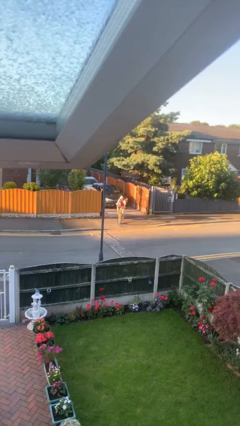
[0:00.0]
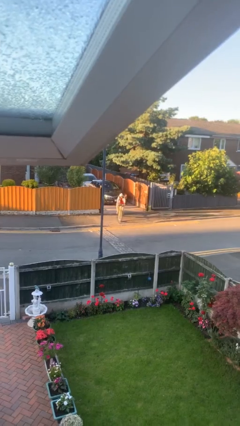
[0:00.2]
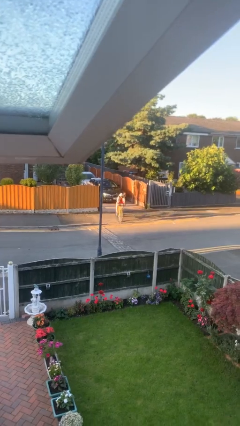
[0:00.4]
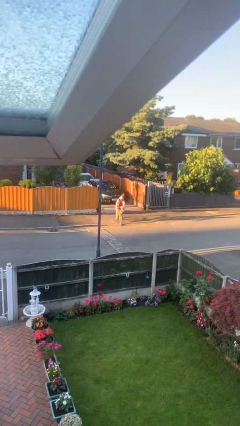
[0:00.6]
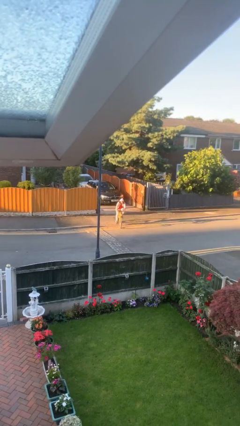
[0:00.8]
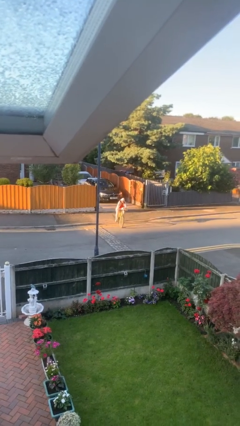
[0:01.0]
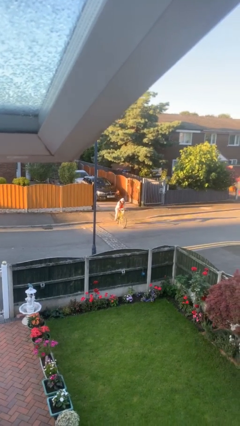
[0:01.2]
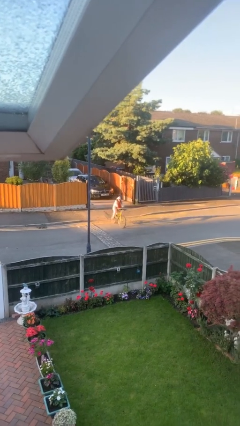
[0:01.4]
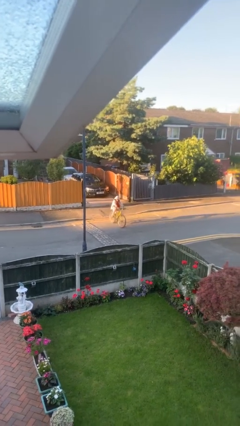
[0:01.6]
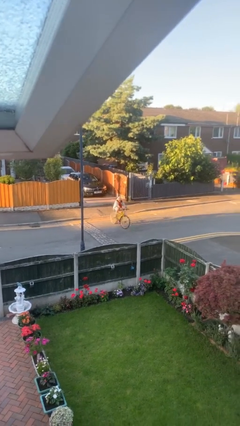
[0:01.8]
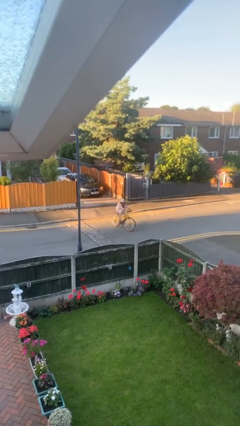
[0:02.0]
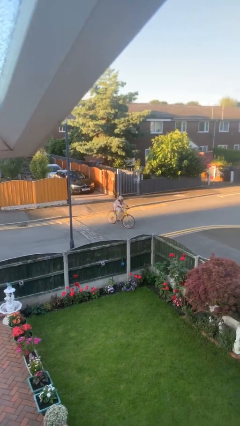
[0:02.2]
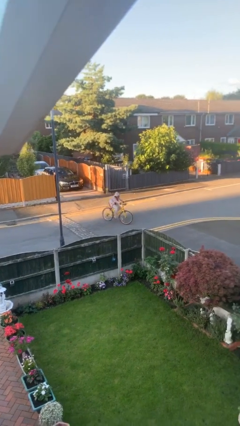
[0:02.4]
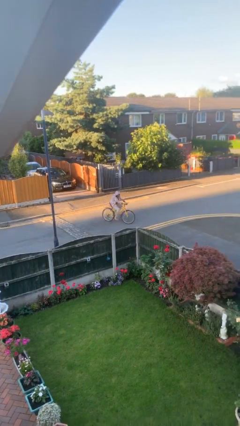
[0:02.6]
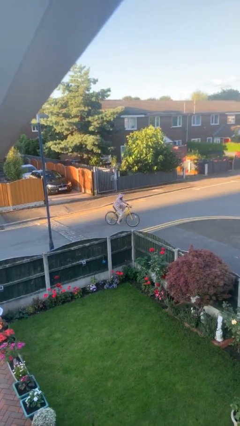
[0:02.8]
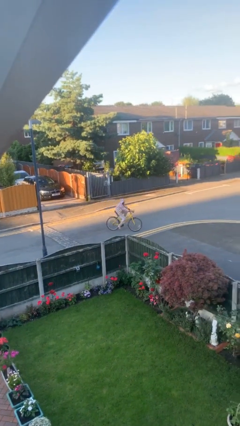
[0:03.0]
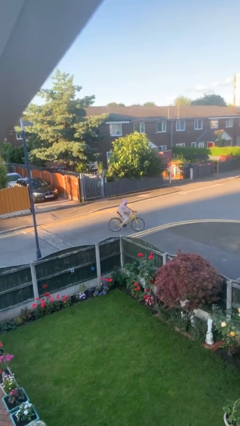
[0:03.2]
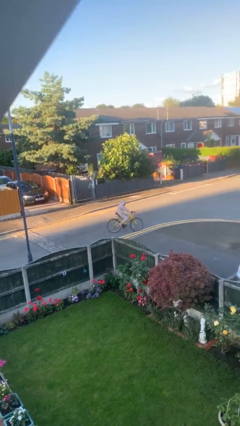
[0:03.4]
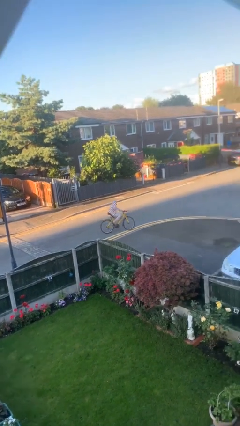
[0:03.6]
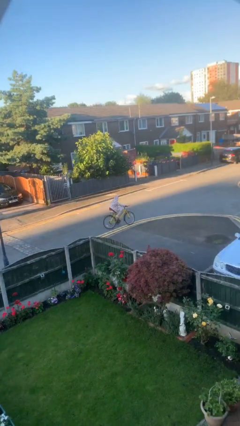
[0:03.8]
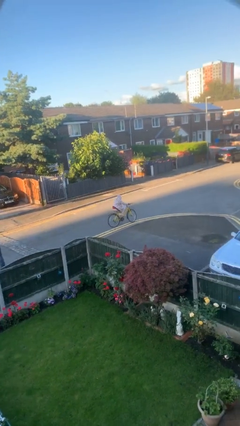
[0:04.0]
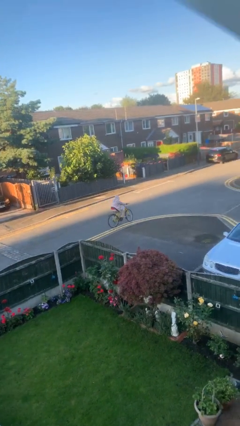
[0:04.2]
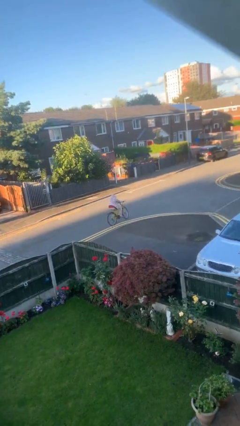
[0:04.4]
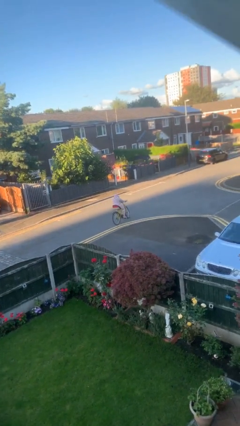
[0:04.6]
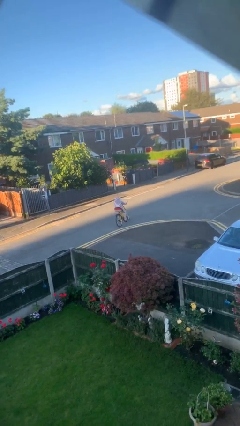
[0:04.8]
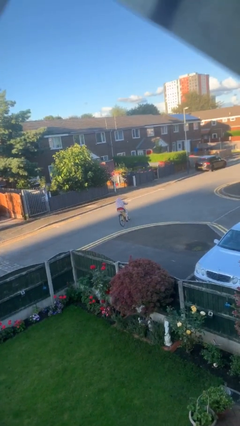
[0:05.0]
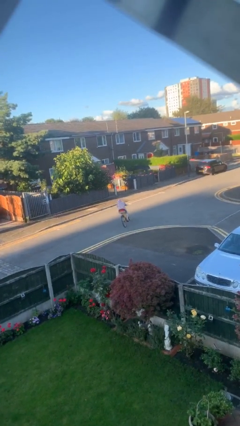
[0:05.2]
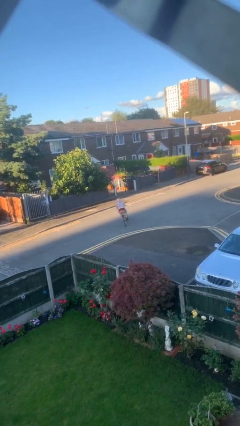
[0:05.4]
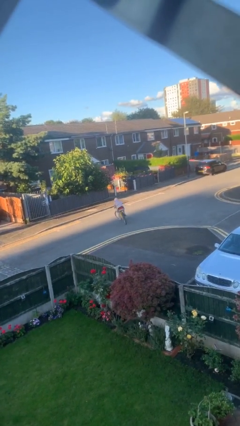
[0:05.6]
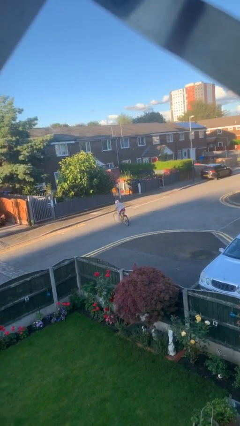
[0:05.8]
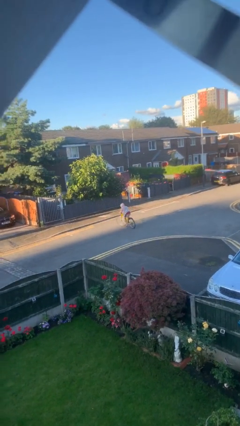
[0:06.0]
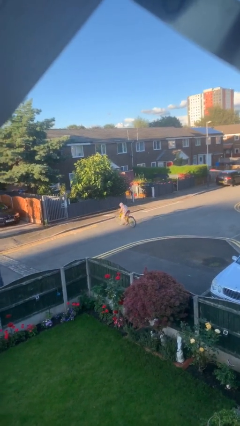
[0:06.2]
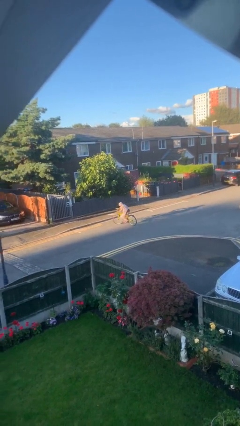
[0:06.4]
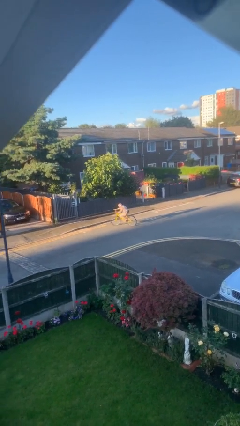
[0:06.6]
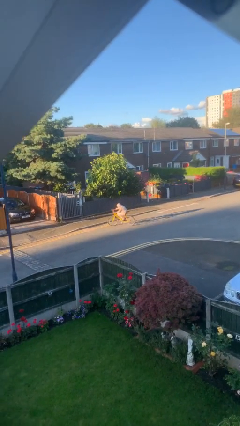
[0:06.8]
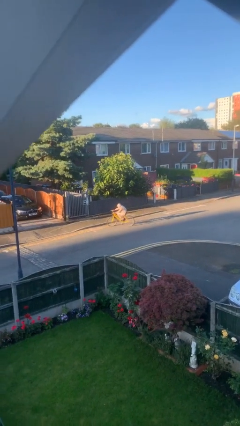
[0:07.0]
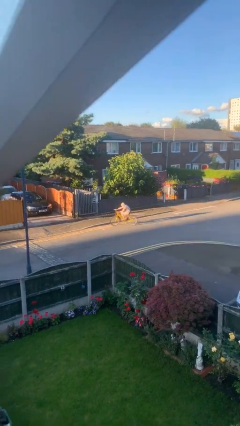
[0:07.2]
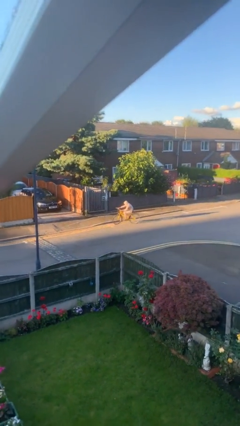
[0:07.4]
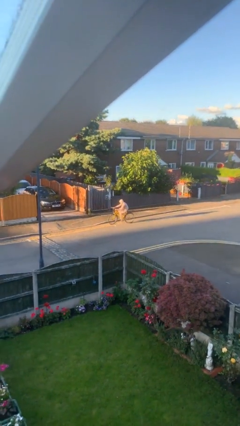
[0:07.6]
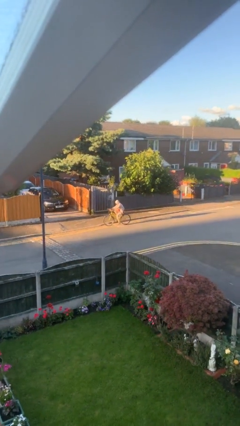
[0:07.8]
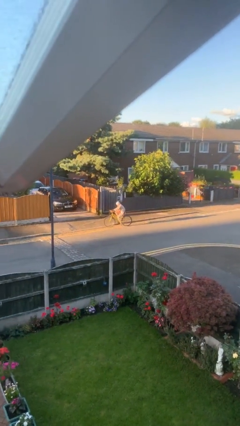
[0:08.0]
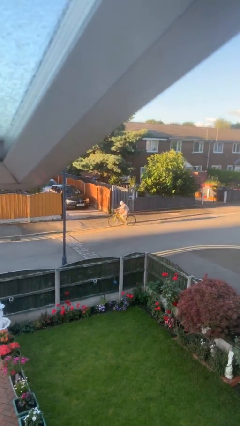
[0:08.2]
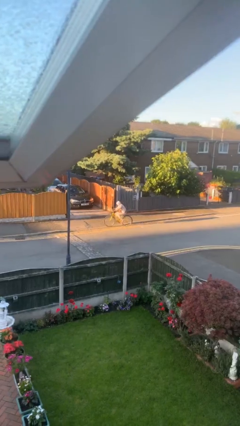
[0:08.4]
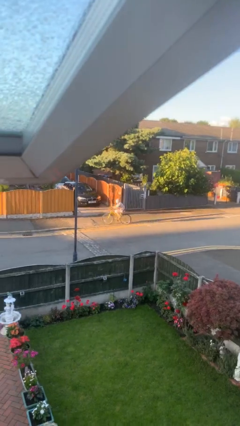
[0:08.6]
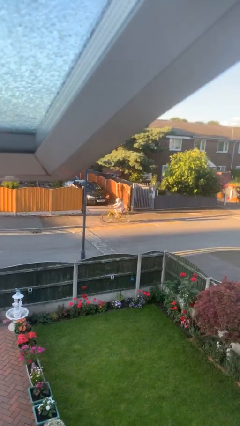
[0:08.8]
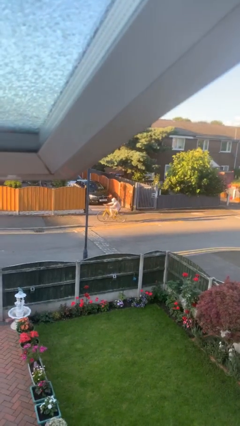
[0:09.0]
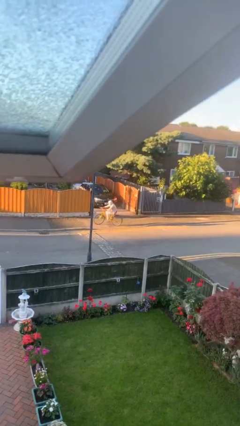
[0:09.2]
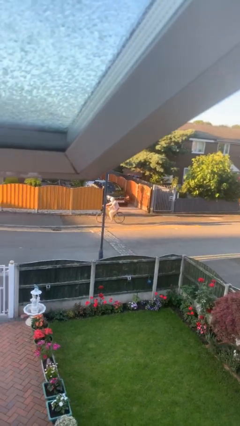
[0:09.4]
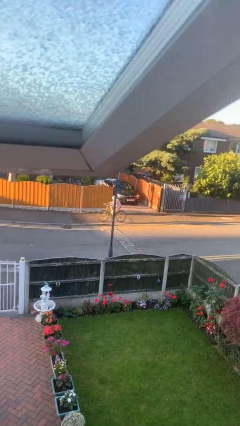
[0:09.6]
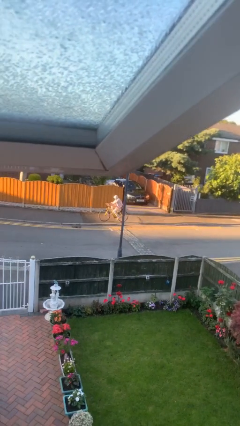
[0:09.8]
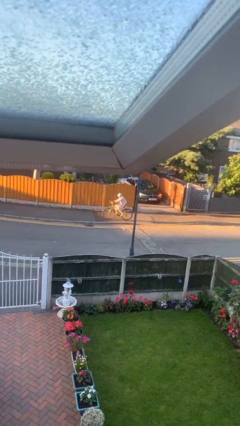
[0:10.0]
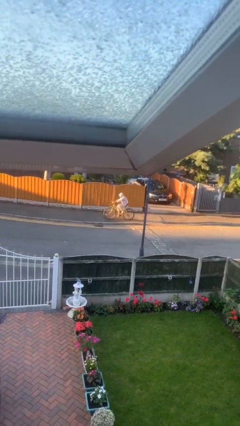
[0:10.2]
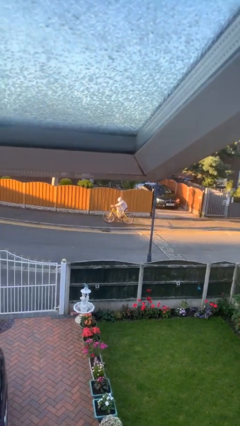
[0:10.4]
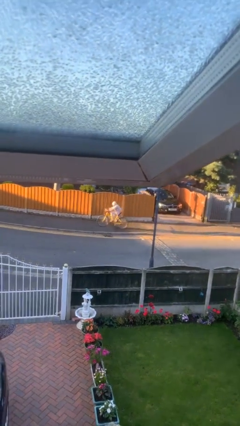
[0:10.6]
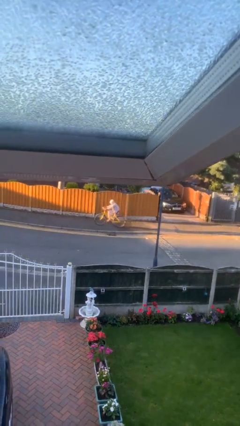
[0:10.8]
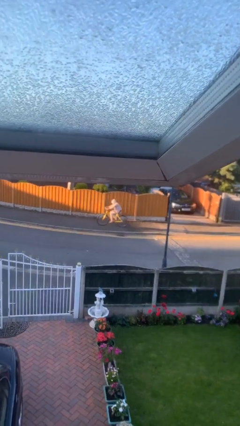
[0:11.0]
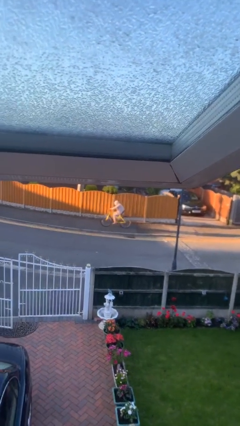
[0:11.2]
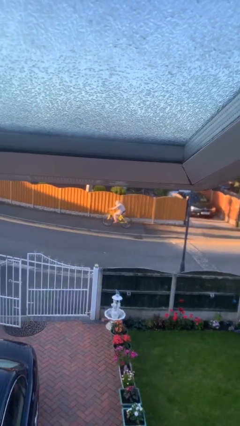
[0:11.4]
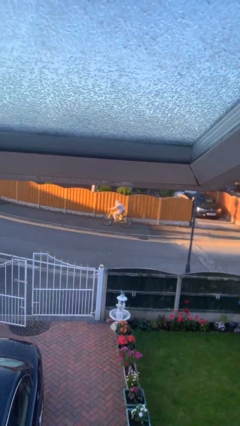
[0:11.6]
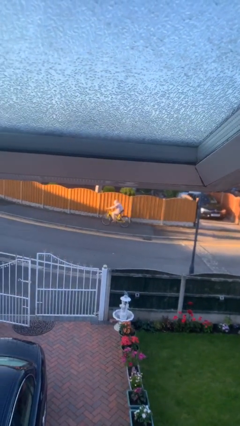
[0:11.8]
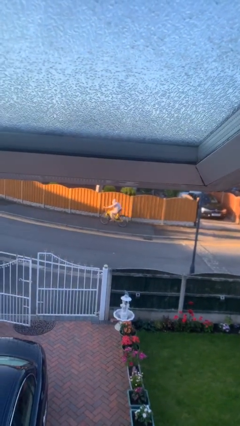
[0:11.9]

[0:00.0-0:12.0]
person rides bicycle

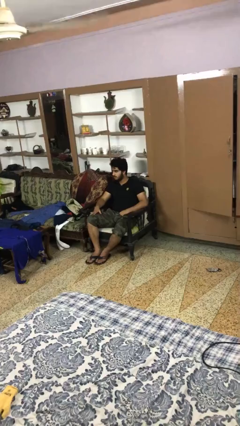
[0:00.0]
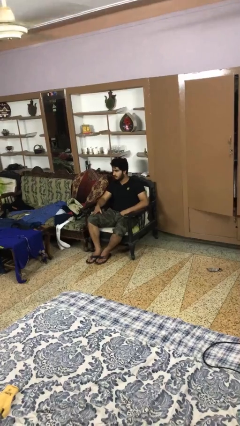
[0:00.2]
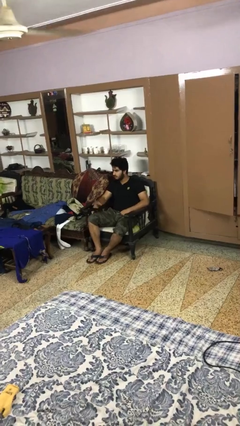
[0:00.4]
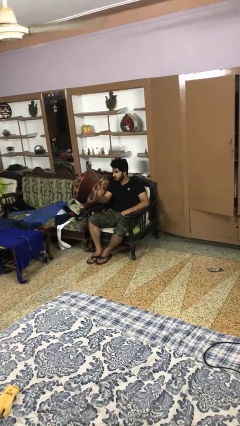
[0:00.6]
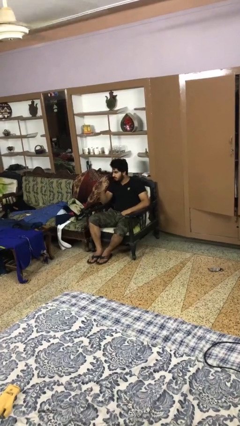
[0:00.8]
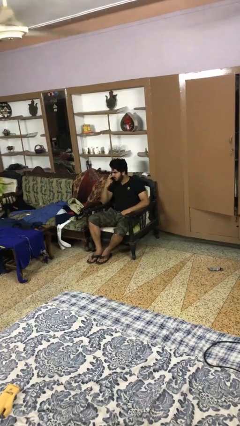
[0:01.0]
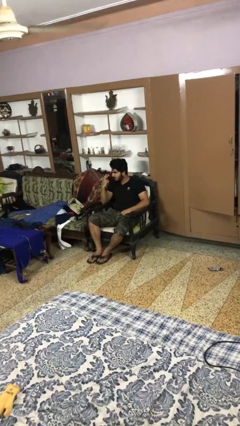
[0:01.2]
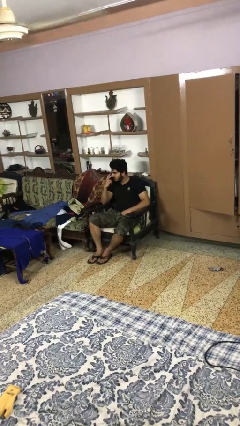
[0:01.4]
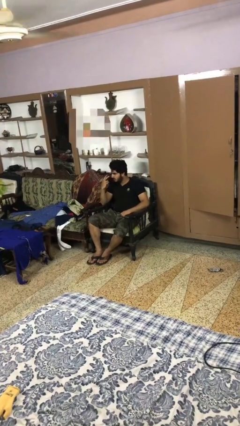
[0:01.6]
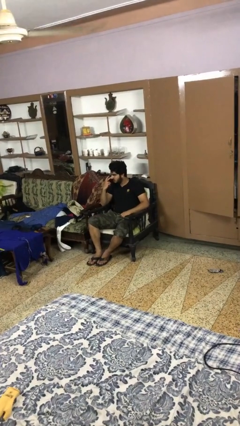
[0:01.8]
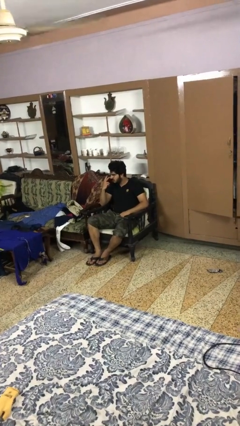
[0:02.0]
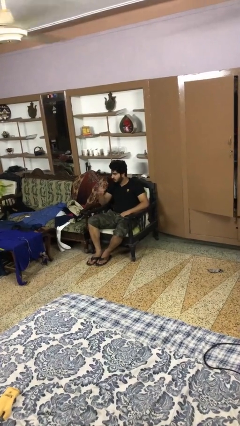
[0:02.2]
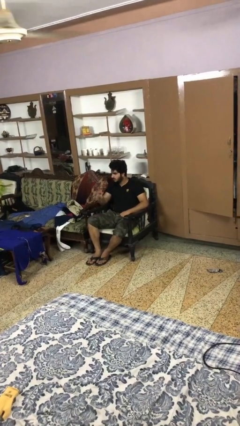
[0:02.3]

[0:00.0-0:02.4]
person gestures watch closely

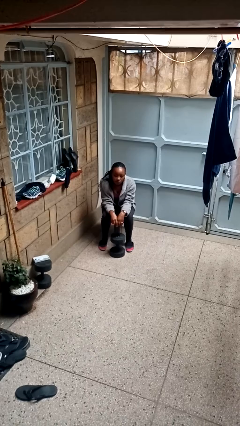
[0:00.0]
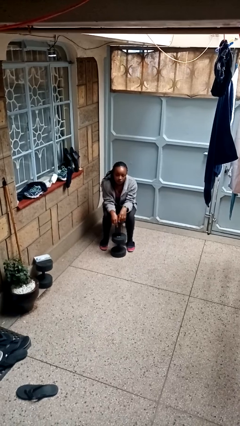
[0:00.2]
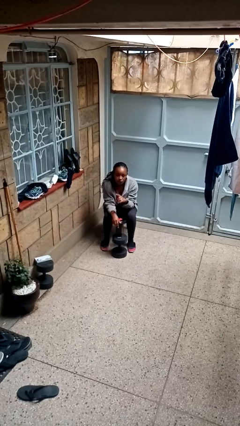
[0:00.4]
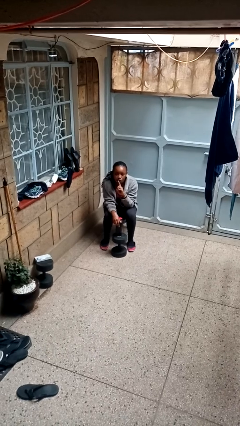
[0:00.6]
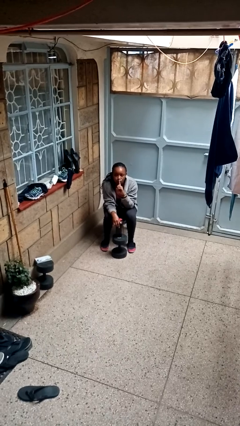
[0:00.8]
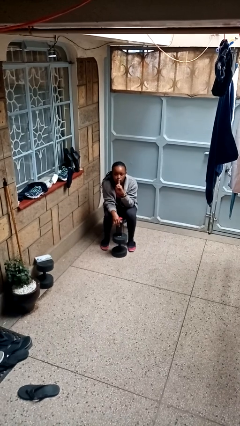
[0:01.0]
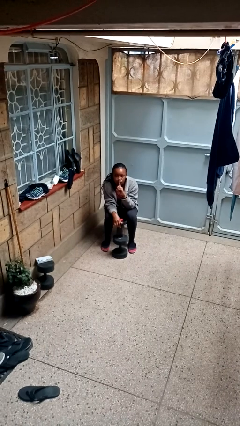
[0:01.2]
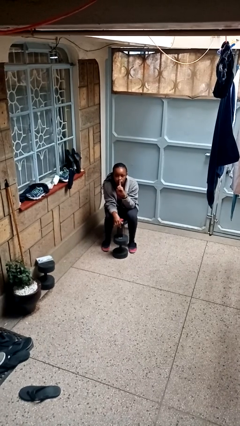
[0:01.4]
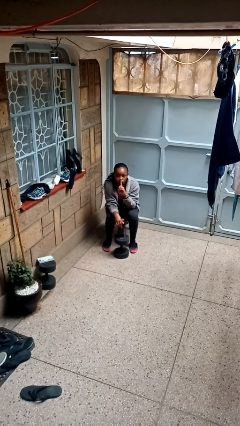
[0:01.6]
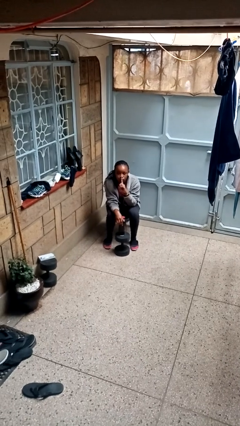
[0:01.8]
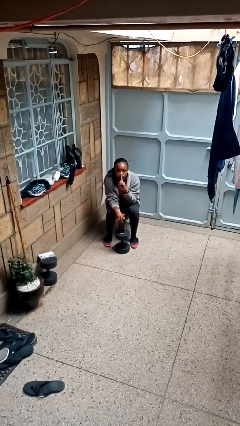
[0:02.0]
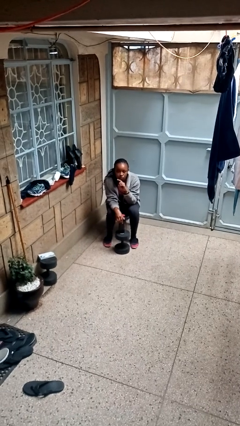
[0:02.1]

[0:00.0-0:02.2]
person gestures be quiet

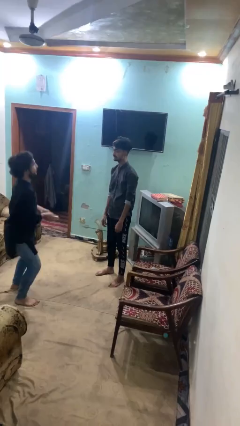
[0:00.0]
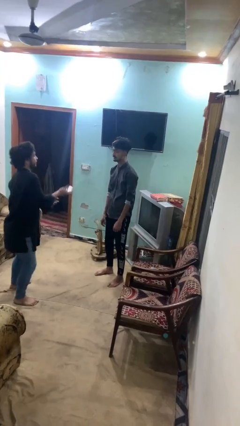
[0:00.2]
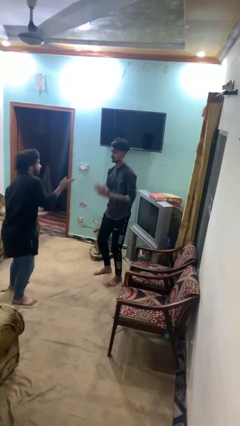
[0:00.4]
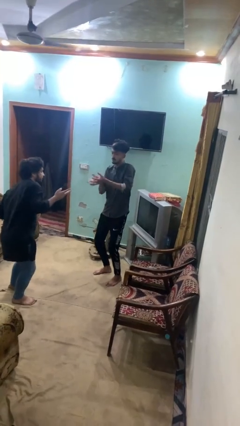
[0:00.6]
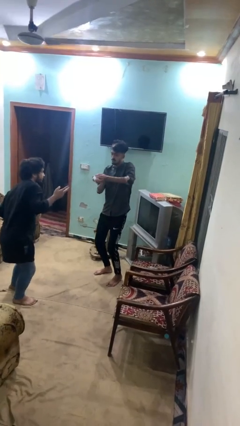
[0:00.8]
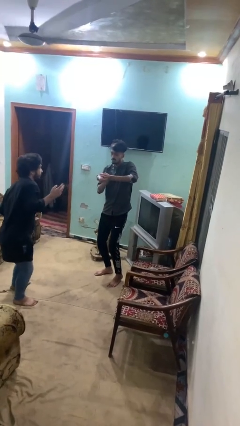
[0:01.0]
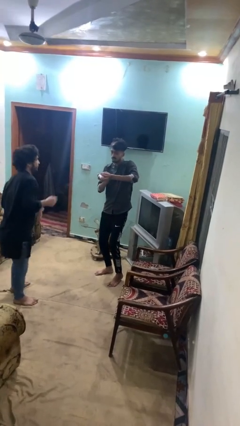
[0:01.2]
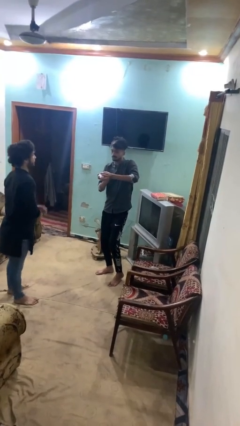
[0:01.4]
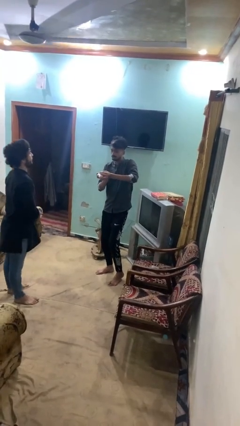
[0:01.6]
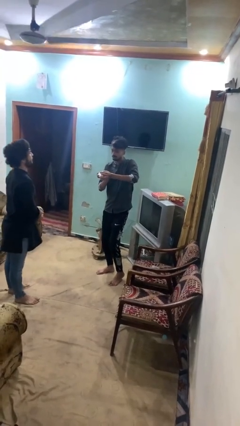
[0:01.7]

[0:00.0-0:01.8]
person catches object from person
